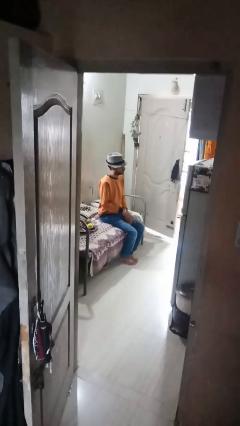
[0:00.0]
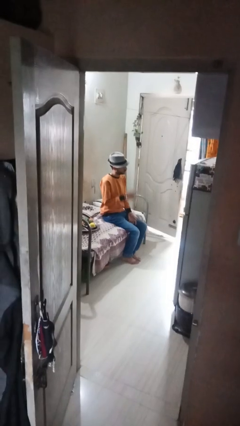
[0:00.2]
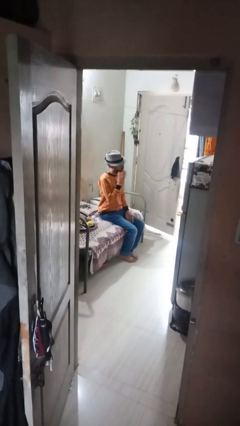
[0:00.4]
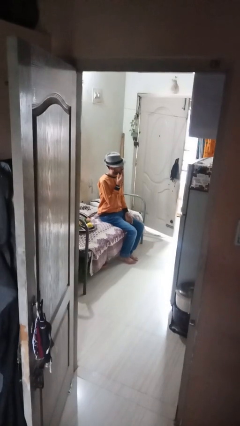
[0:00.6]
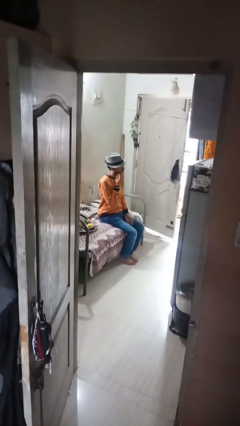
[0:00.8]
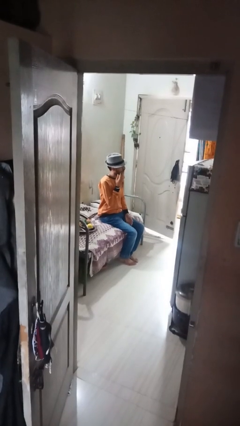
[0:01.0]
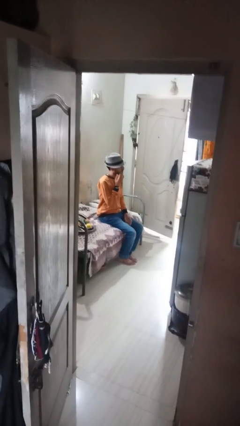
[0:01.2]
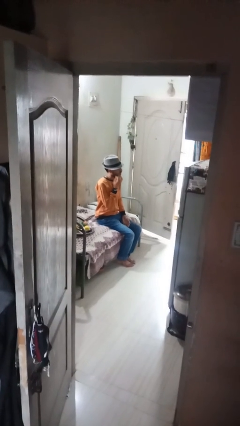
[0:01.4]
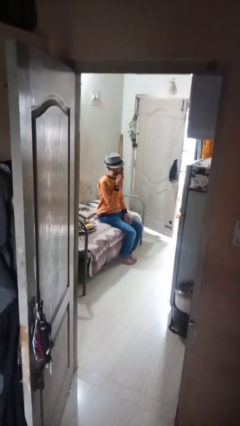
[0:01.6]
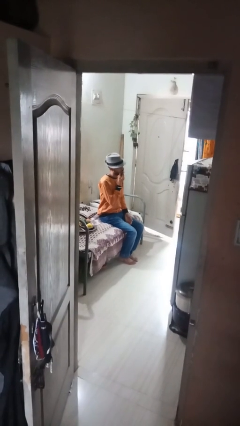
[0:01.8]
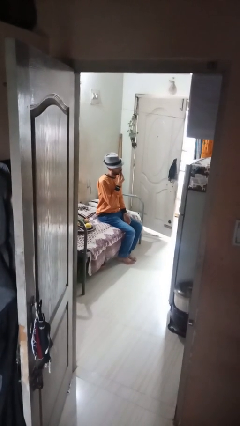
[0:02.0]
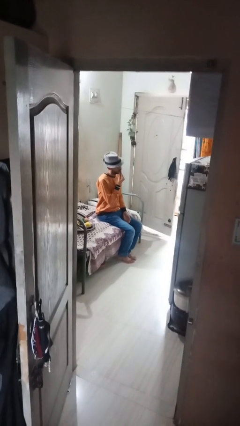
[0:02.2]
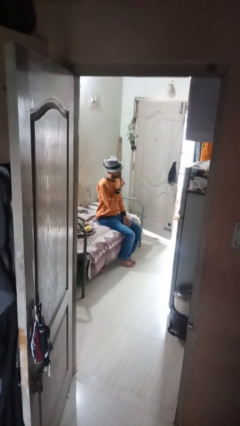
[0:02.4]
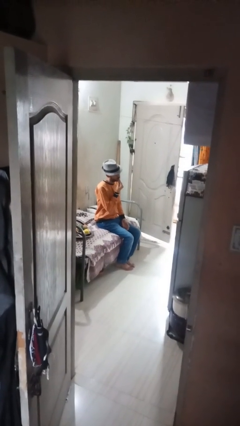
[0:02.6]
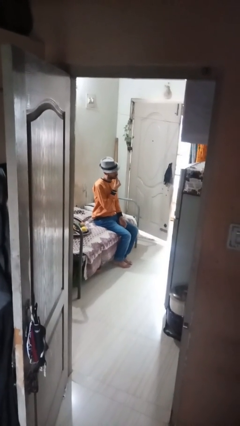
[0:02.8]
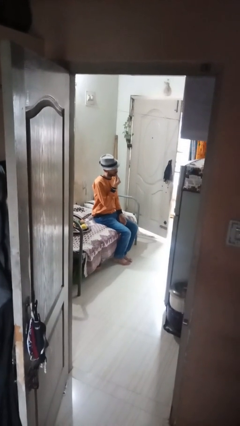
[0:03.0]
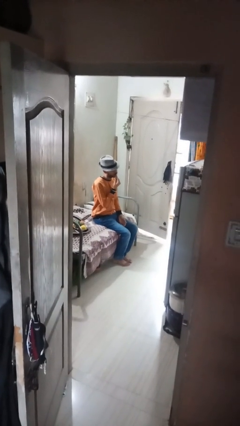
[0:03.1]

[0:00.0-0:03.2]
person strokes chin

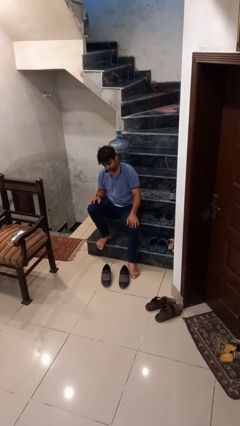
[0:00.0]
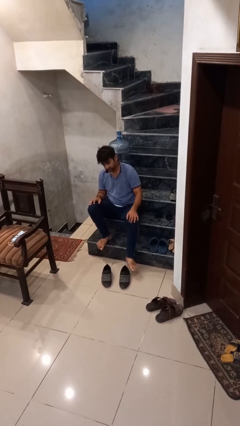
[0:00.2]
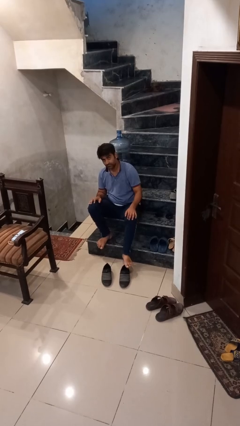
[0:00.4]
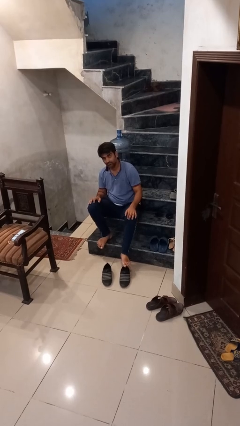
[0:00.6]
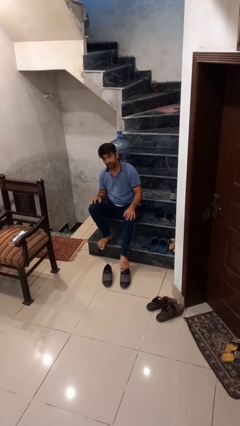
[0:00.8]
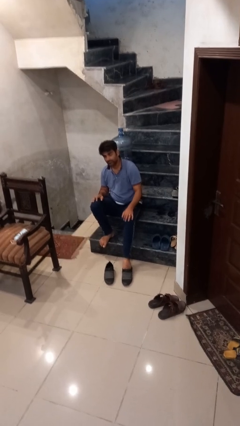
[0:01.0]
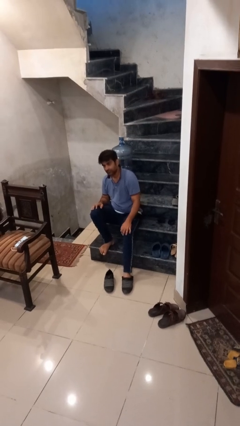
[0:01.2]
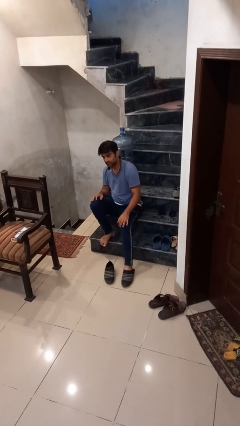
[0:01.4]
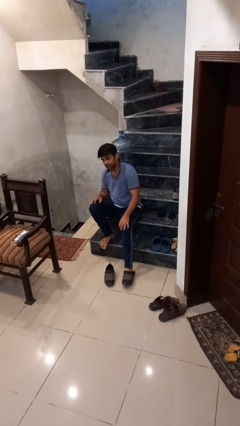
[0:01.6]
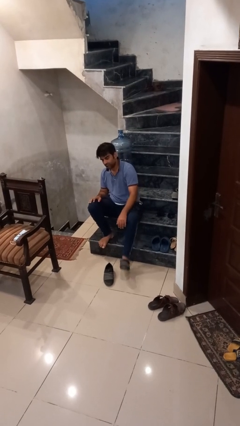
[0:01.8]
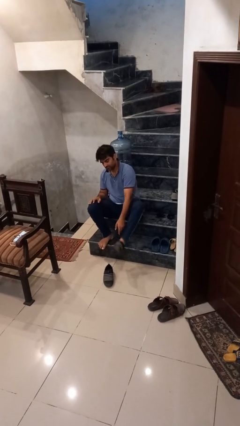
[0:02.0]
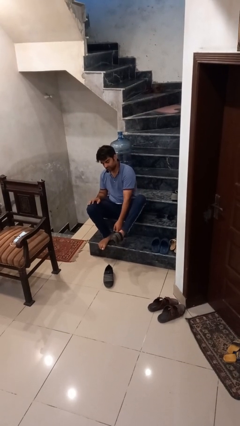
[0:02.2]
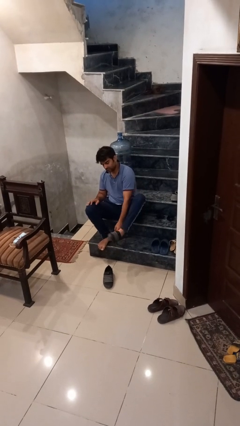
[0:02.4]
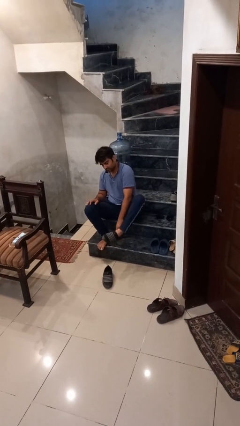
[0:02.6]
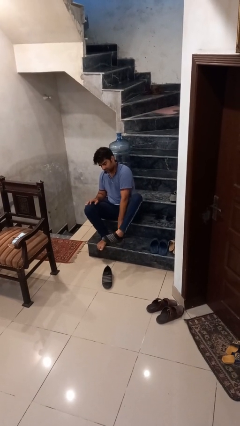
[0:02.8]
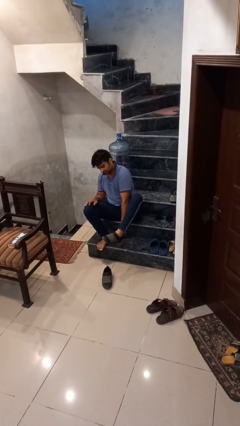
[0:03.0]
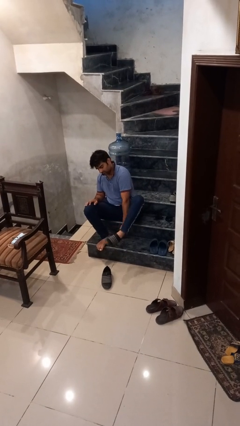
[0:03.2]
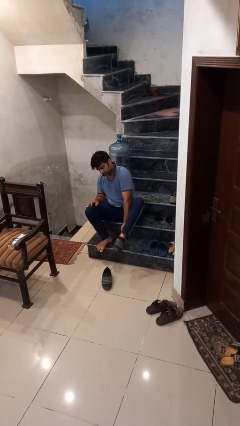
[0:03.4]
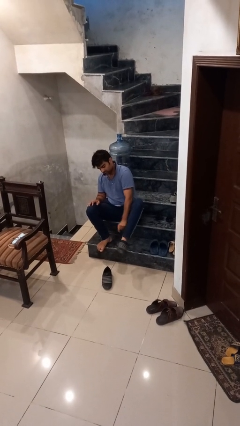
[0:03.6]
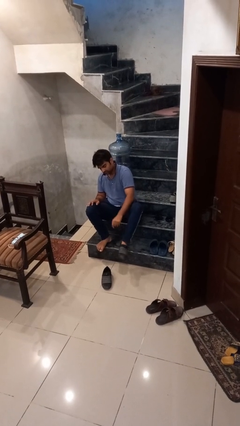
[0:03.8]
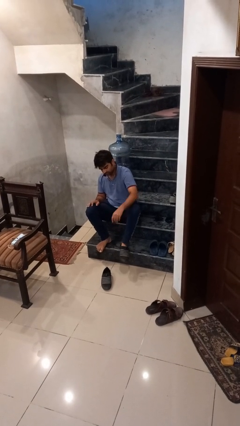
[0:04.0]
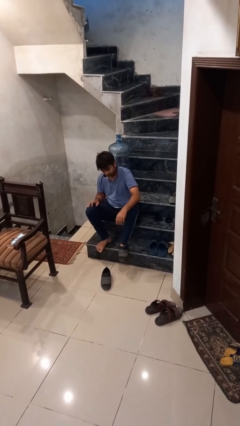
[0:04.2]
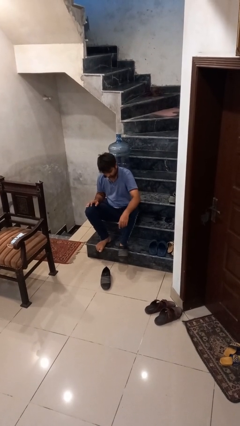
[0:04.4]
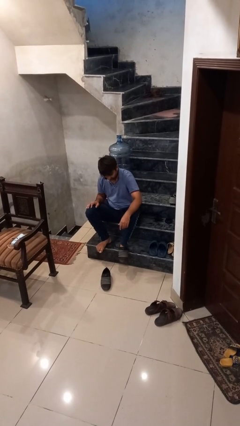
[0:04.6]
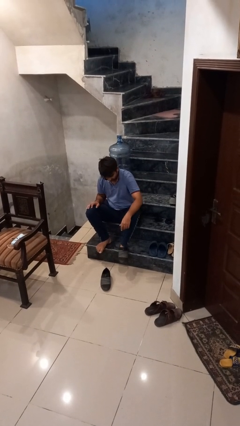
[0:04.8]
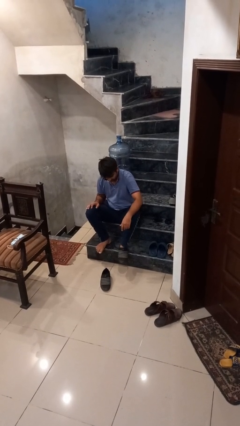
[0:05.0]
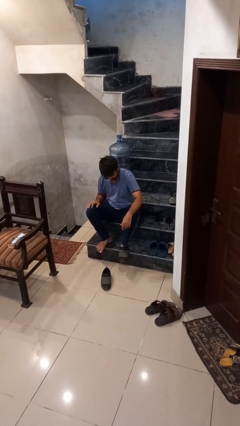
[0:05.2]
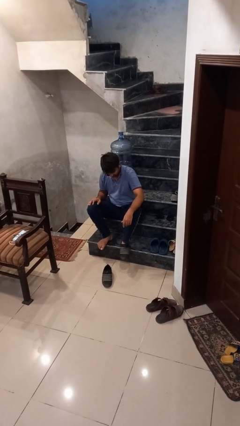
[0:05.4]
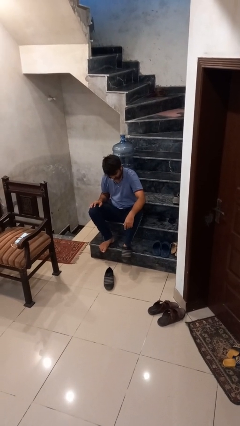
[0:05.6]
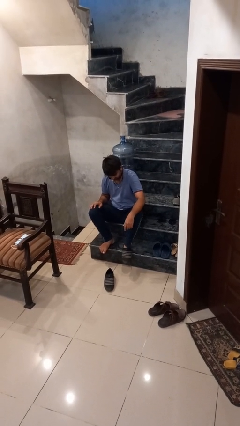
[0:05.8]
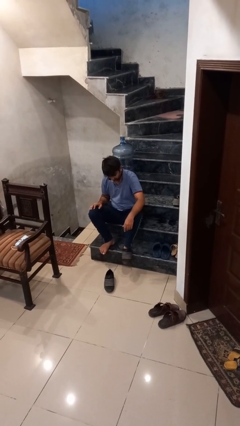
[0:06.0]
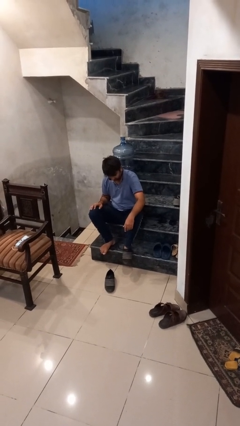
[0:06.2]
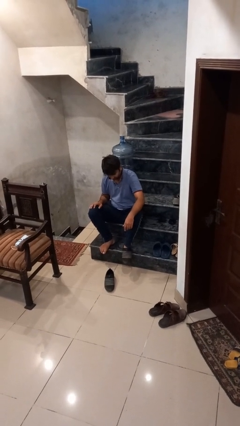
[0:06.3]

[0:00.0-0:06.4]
person puts on shoes

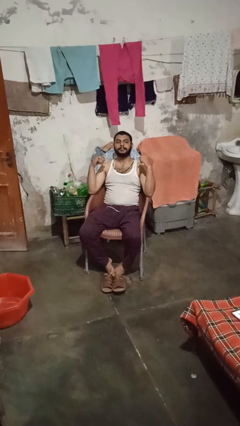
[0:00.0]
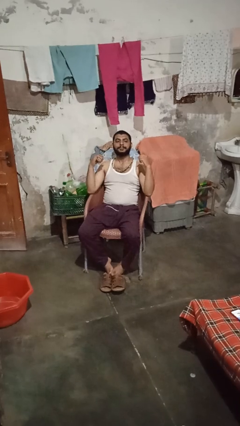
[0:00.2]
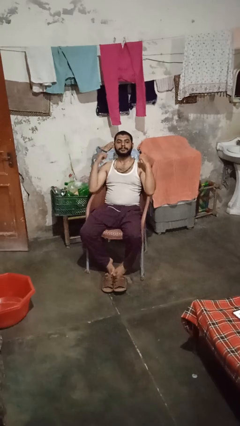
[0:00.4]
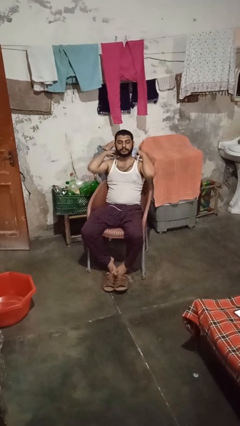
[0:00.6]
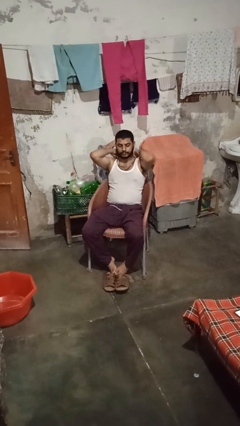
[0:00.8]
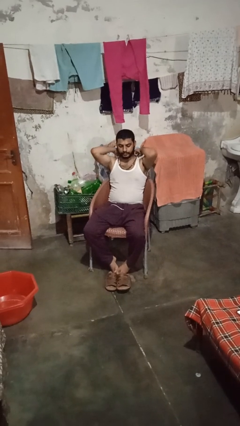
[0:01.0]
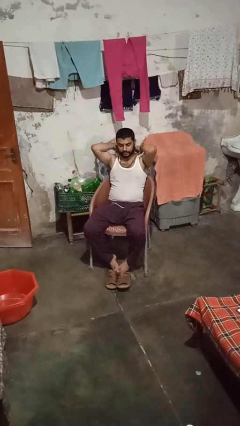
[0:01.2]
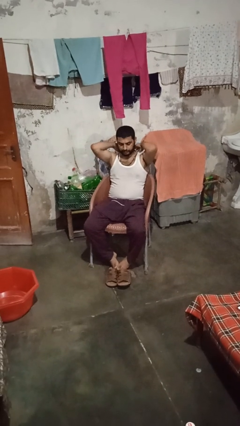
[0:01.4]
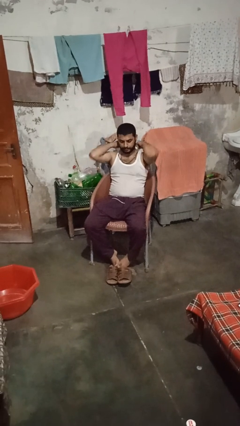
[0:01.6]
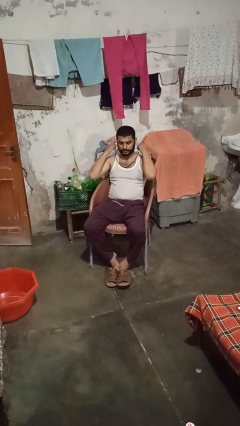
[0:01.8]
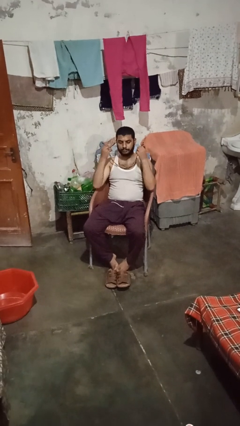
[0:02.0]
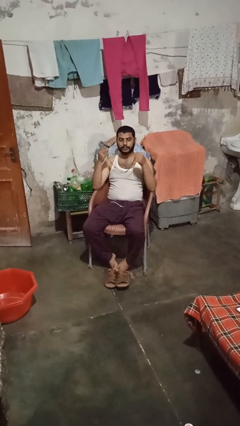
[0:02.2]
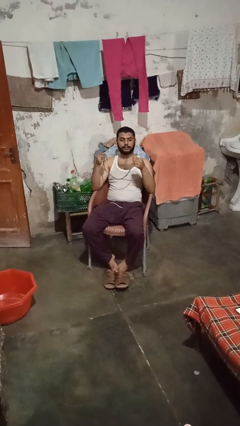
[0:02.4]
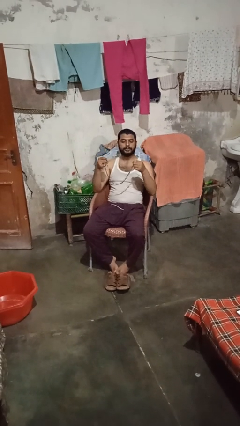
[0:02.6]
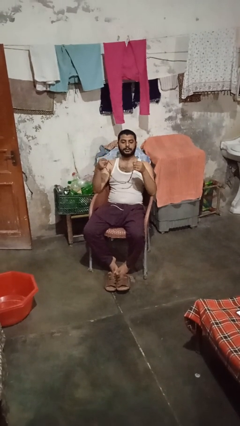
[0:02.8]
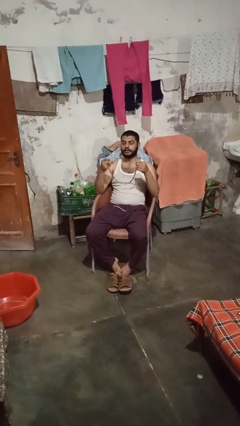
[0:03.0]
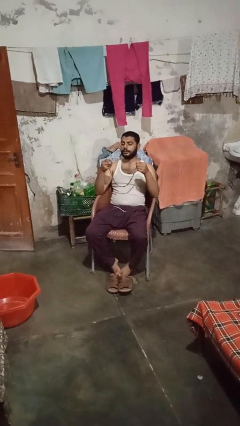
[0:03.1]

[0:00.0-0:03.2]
person takes off necklace

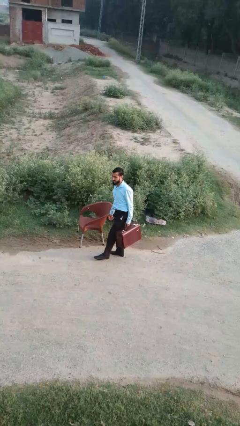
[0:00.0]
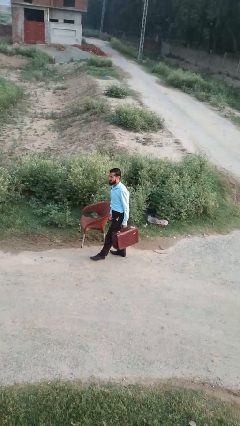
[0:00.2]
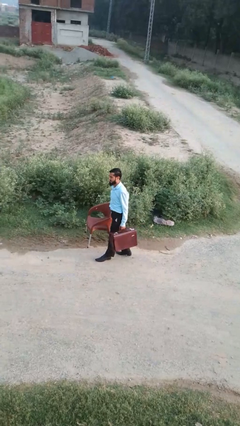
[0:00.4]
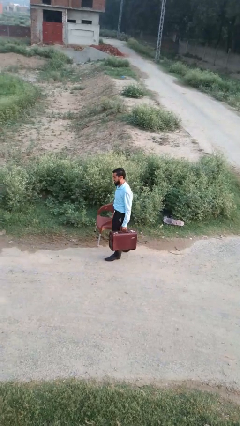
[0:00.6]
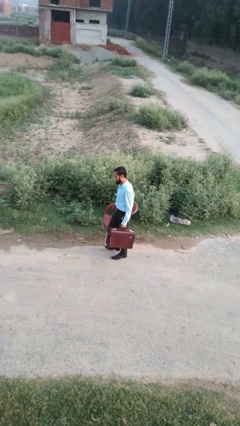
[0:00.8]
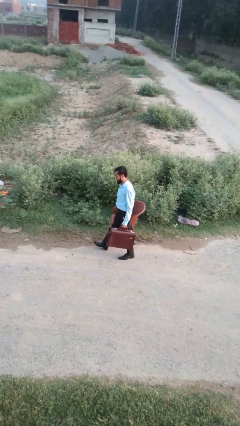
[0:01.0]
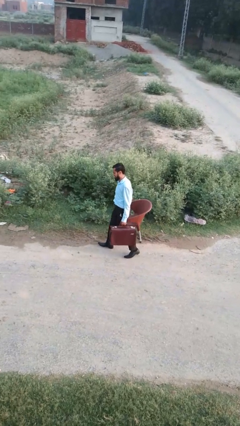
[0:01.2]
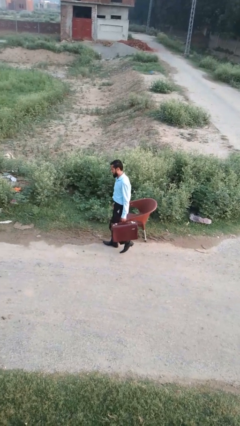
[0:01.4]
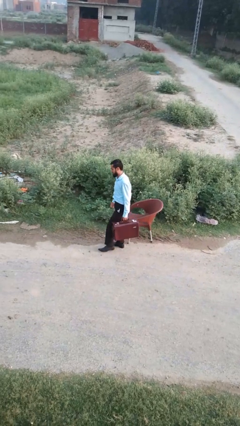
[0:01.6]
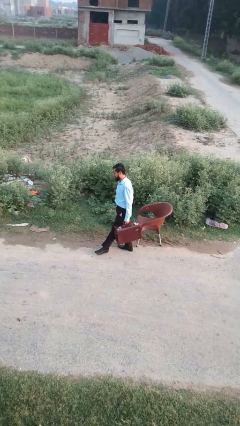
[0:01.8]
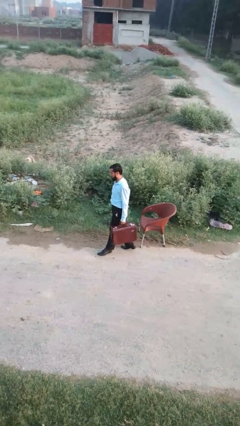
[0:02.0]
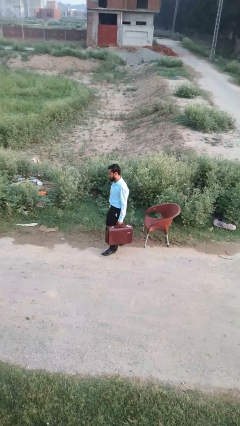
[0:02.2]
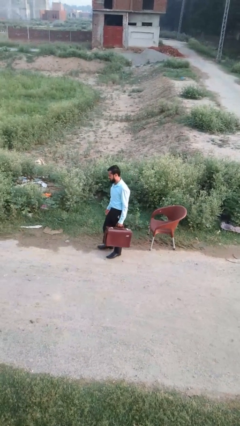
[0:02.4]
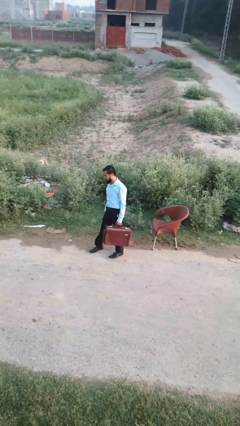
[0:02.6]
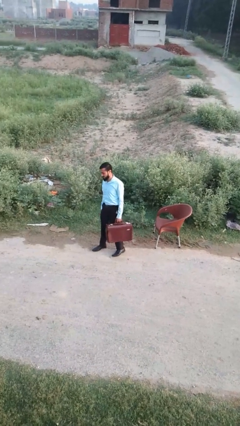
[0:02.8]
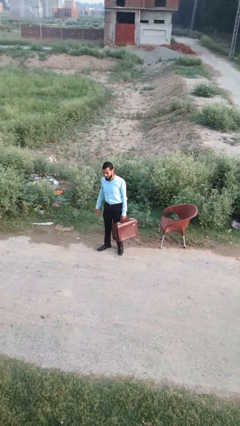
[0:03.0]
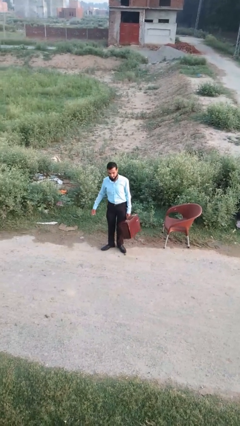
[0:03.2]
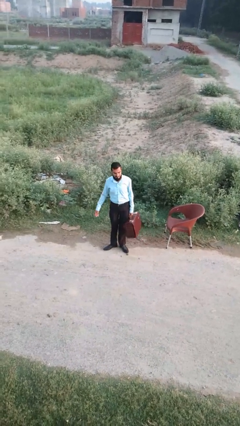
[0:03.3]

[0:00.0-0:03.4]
person carries groceries

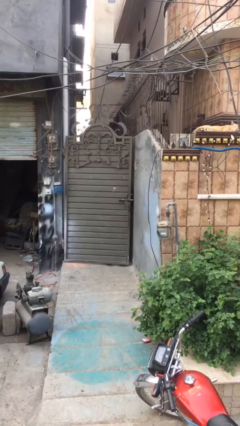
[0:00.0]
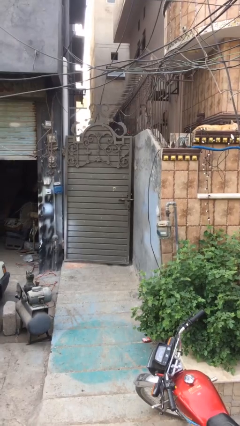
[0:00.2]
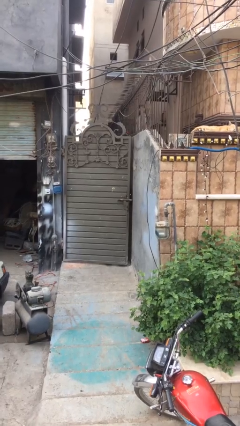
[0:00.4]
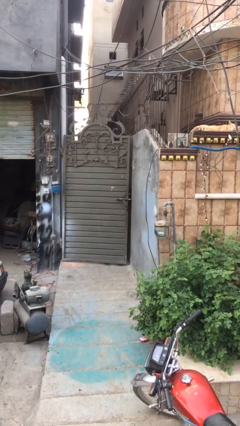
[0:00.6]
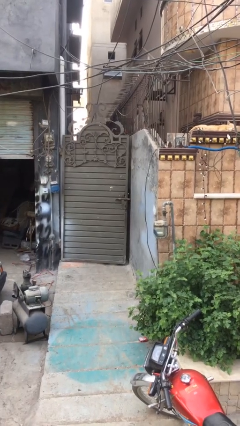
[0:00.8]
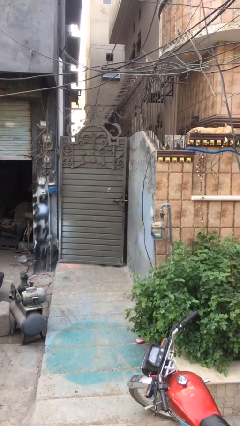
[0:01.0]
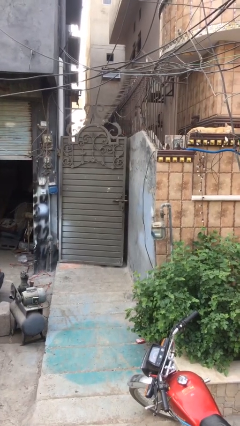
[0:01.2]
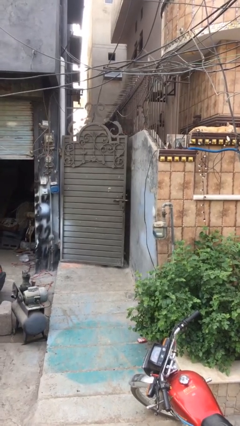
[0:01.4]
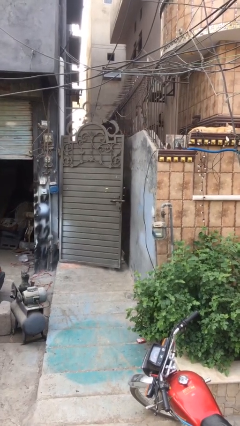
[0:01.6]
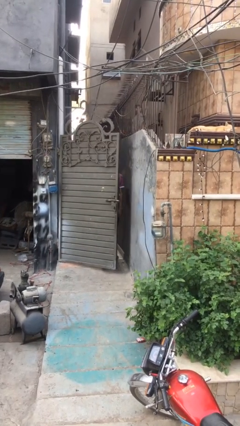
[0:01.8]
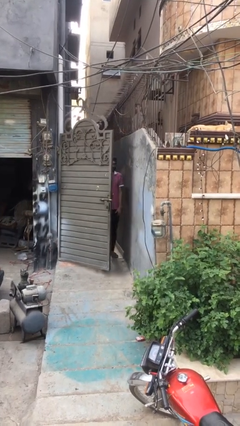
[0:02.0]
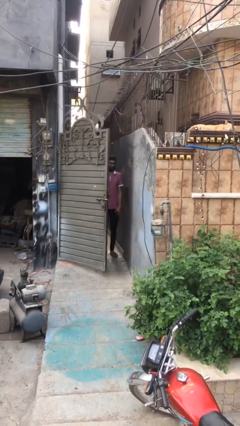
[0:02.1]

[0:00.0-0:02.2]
person opens facility door
